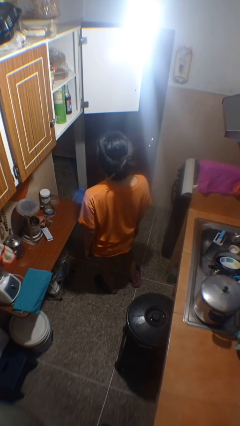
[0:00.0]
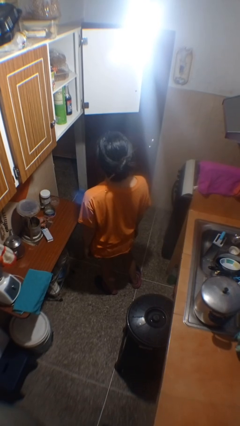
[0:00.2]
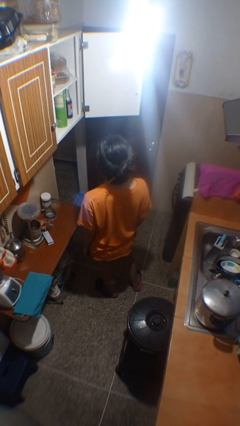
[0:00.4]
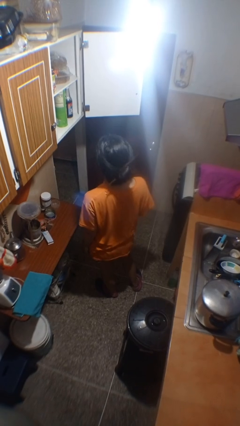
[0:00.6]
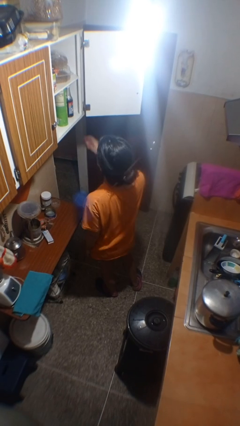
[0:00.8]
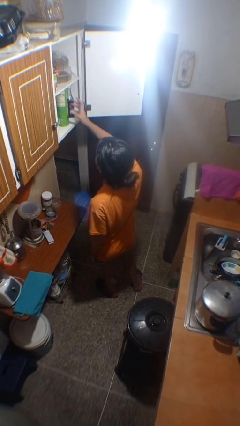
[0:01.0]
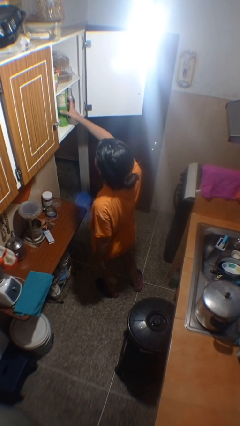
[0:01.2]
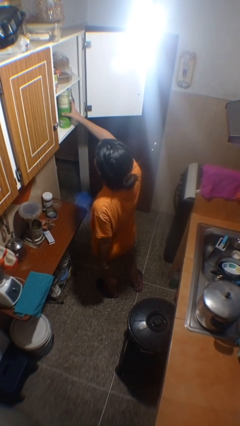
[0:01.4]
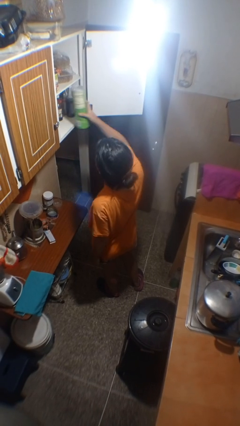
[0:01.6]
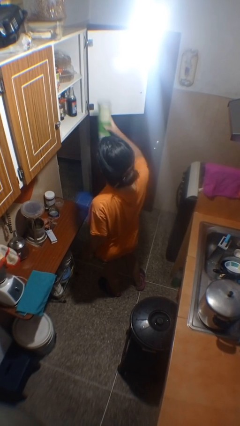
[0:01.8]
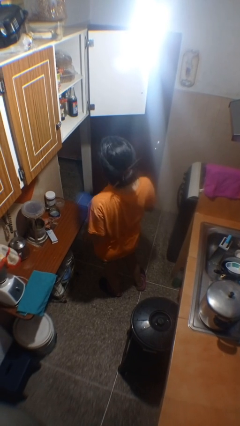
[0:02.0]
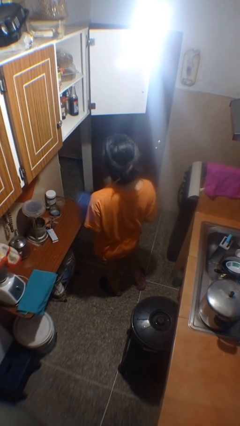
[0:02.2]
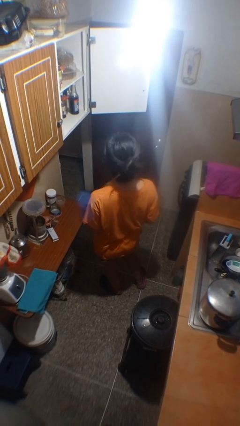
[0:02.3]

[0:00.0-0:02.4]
person takes object from cabinet

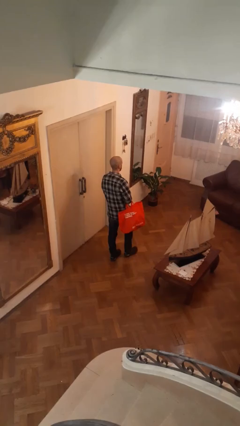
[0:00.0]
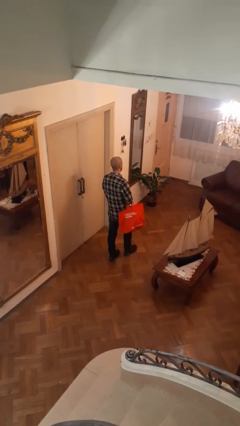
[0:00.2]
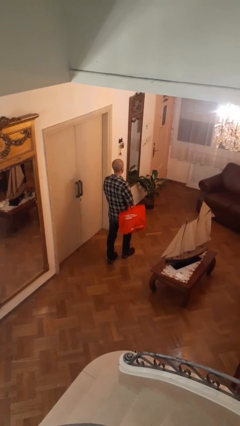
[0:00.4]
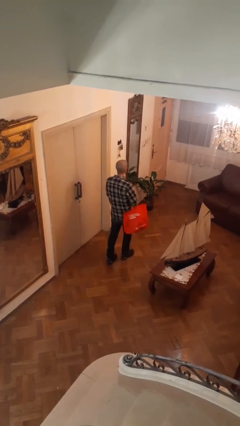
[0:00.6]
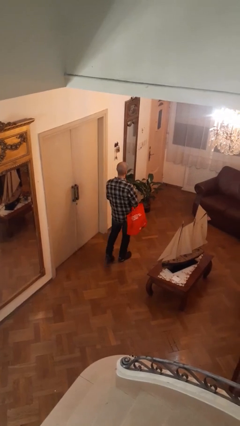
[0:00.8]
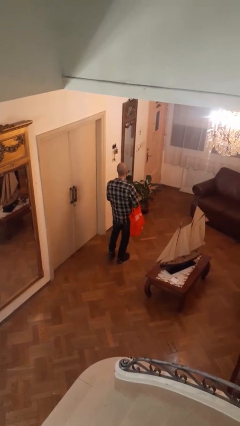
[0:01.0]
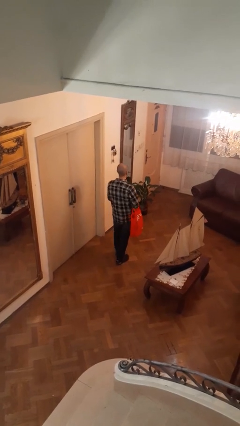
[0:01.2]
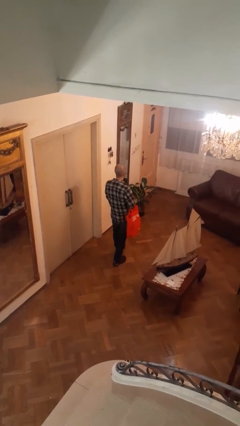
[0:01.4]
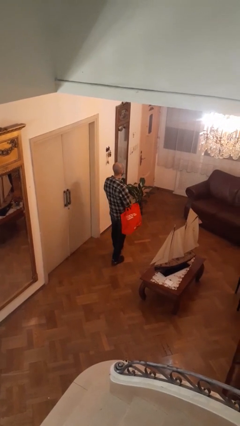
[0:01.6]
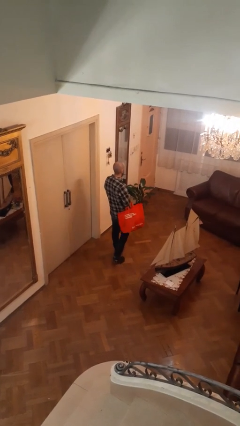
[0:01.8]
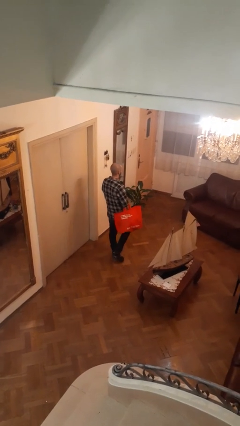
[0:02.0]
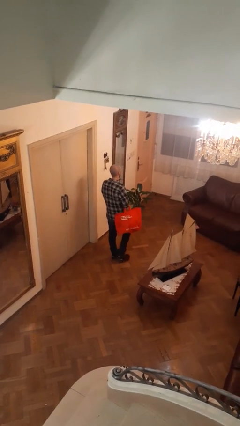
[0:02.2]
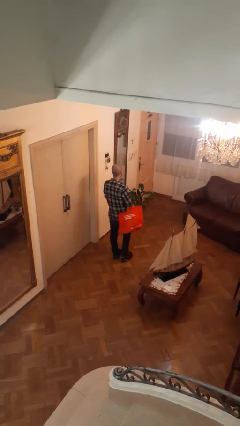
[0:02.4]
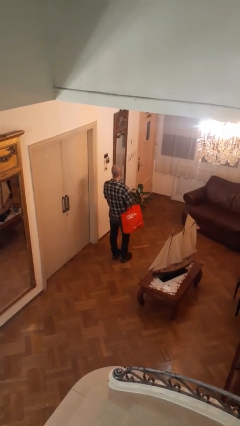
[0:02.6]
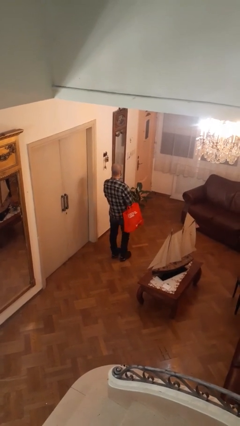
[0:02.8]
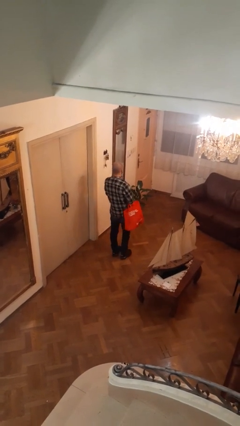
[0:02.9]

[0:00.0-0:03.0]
person carries groceries

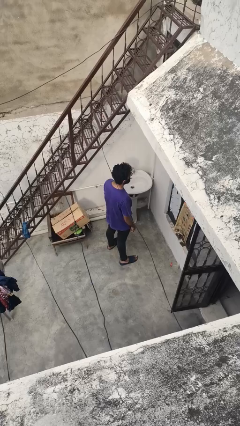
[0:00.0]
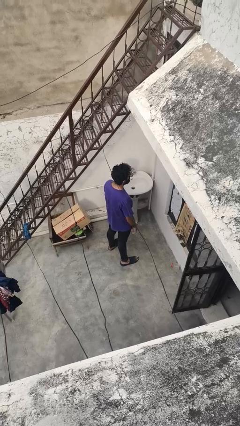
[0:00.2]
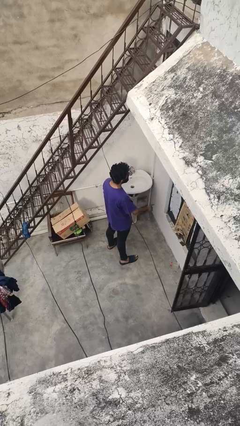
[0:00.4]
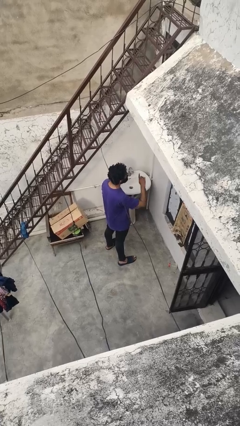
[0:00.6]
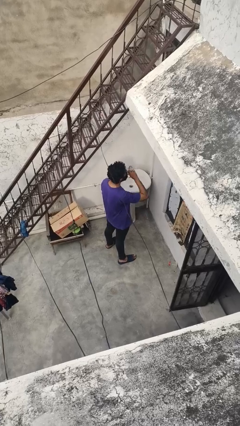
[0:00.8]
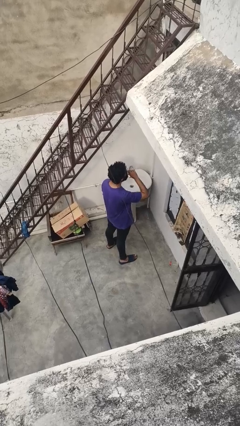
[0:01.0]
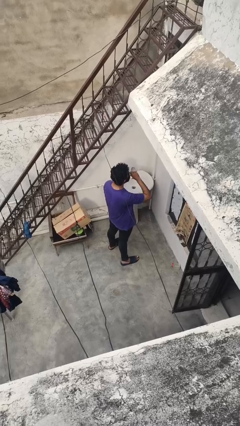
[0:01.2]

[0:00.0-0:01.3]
person gestures be quiet

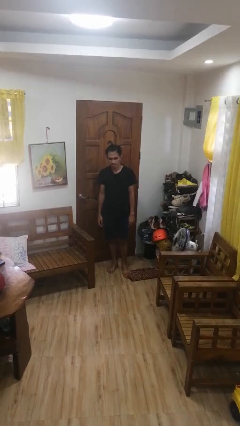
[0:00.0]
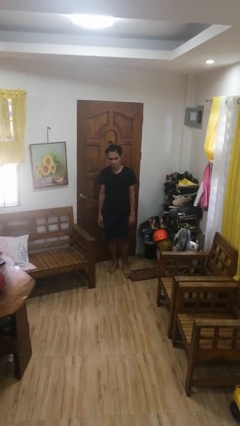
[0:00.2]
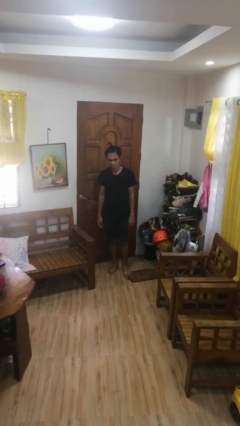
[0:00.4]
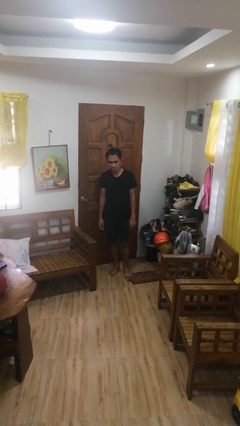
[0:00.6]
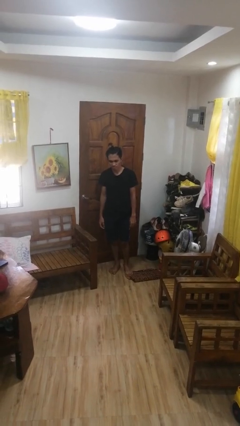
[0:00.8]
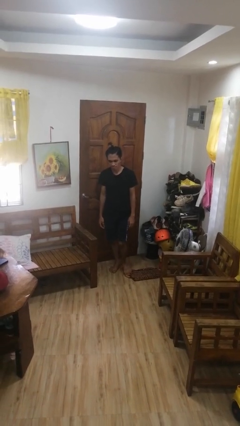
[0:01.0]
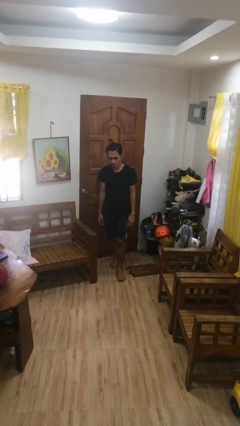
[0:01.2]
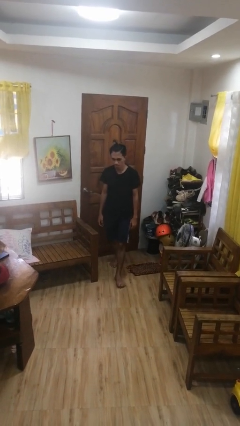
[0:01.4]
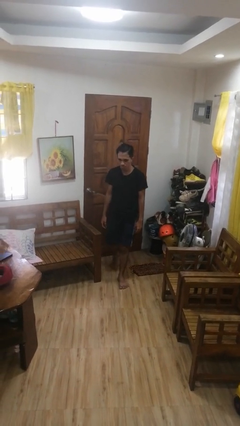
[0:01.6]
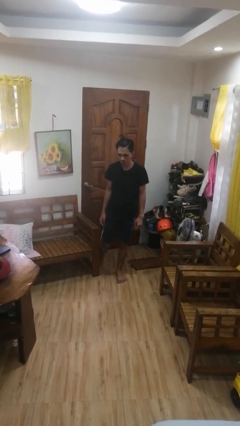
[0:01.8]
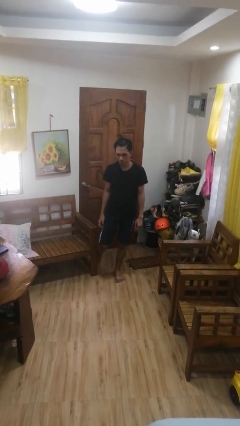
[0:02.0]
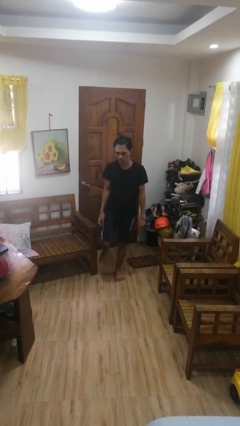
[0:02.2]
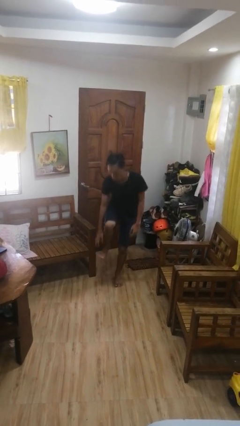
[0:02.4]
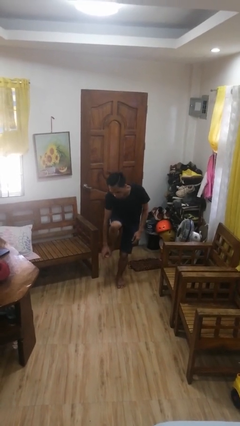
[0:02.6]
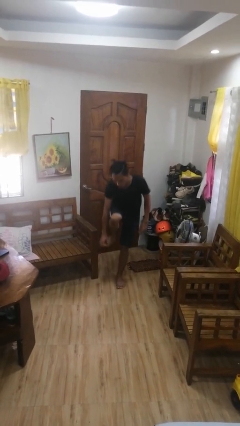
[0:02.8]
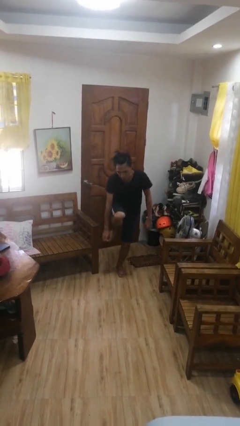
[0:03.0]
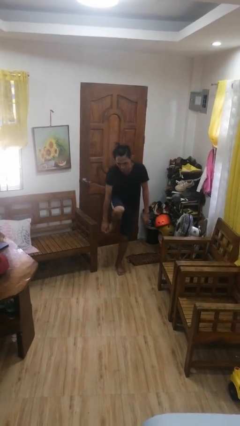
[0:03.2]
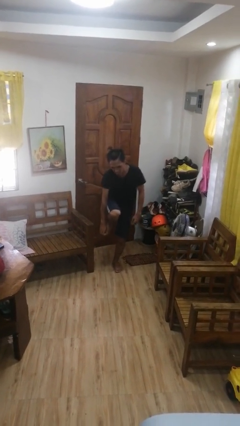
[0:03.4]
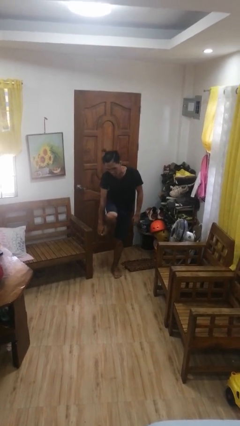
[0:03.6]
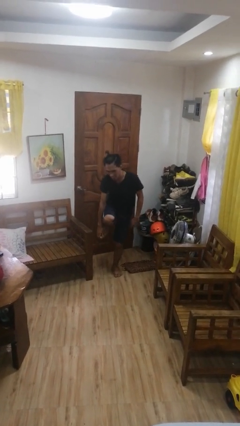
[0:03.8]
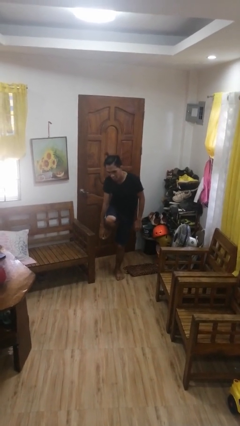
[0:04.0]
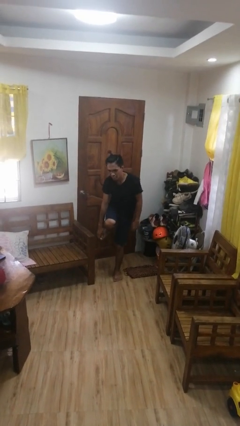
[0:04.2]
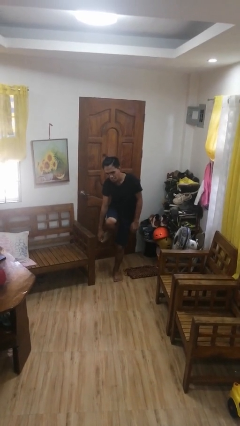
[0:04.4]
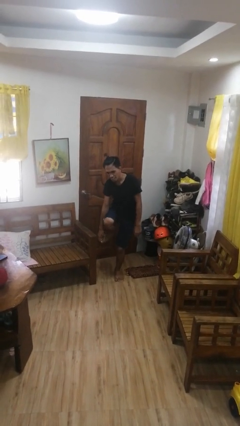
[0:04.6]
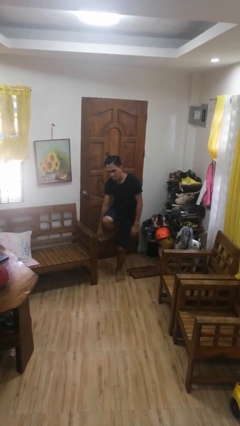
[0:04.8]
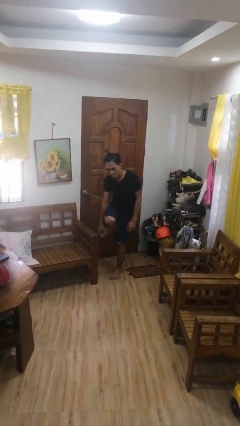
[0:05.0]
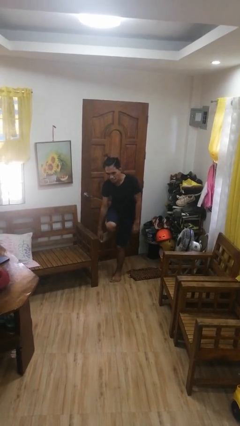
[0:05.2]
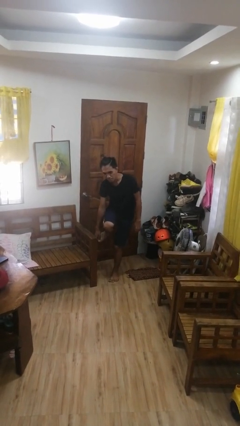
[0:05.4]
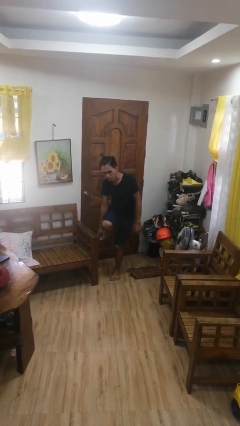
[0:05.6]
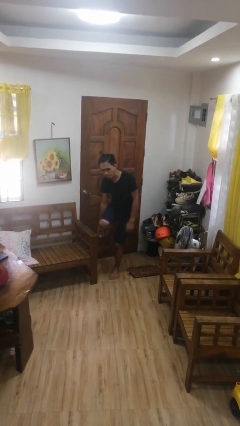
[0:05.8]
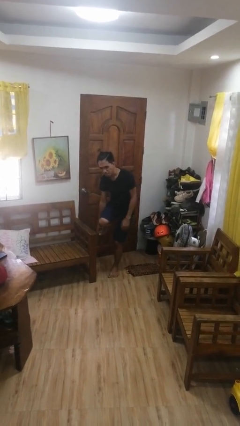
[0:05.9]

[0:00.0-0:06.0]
person stubs toe

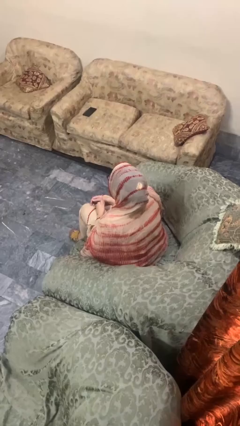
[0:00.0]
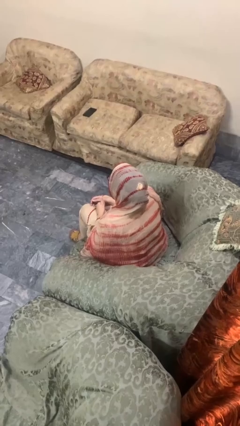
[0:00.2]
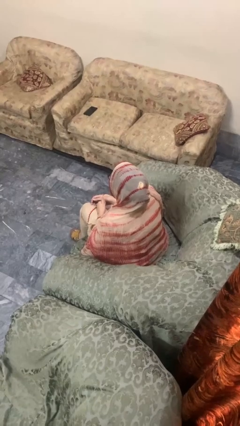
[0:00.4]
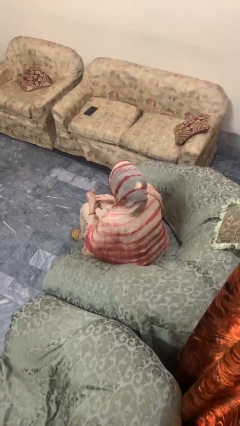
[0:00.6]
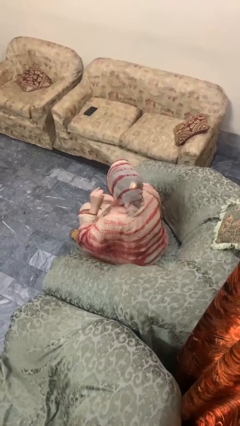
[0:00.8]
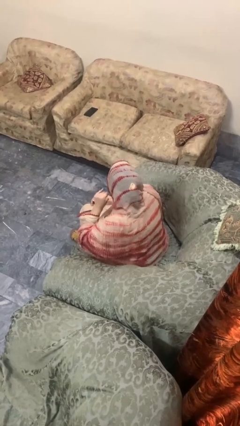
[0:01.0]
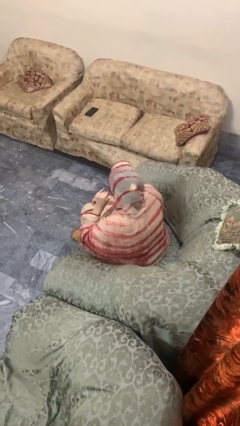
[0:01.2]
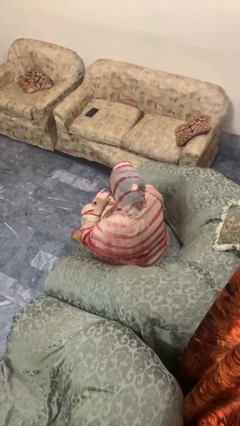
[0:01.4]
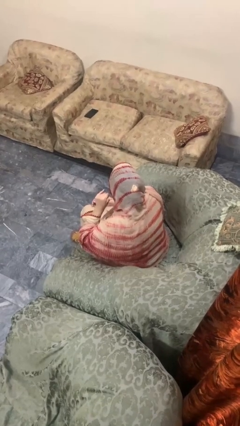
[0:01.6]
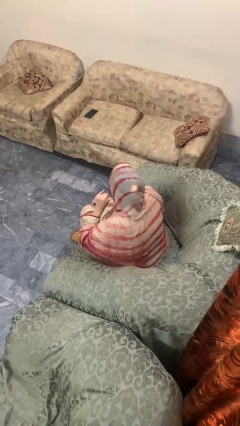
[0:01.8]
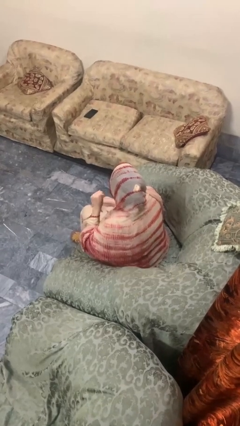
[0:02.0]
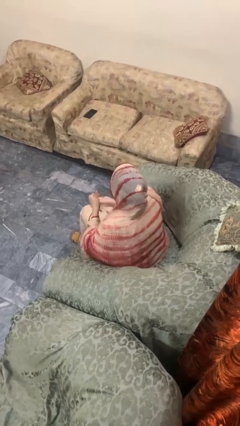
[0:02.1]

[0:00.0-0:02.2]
person gestures call me

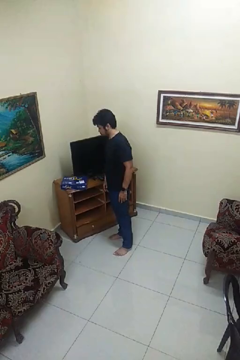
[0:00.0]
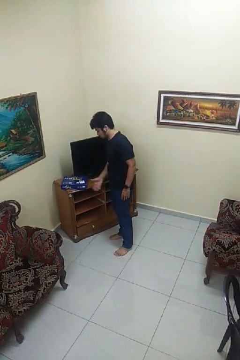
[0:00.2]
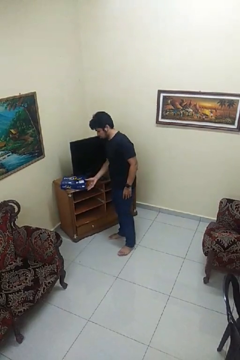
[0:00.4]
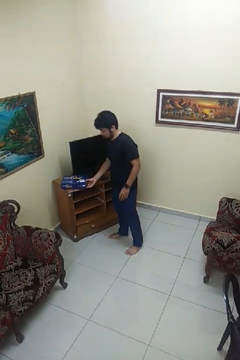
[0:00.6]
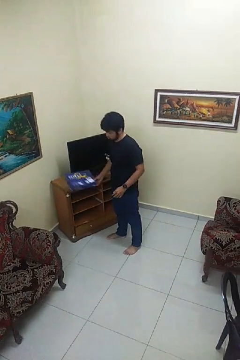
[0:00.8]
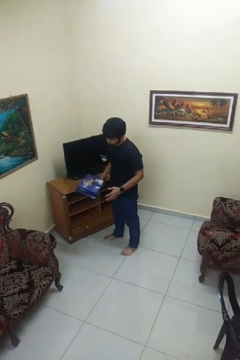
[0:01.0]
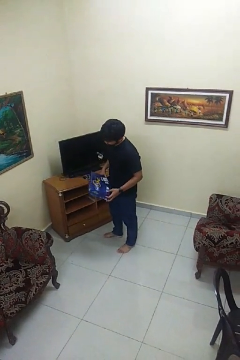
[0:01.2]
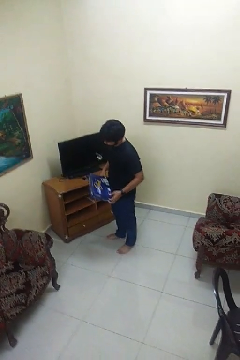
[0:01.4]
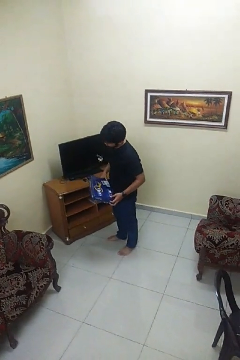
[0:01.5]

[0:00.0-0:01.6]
person picks up object from countertop

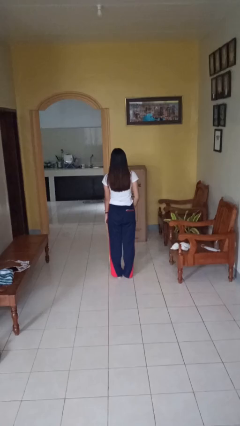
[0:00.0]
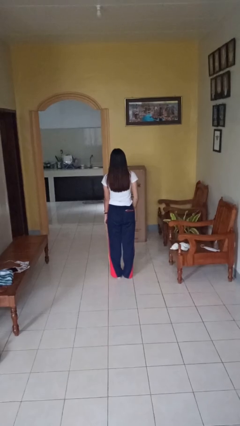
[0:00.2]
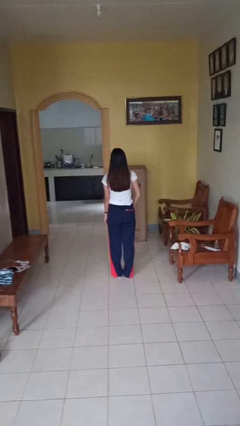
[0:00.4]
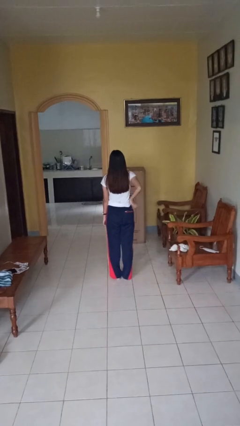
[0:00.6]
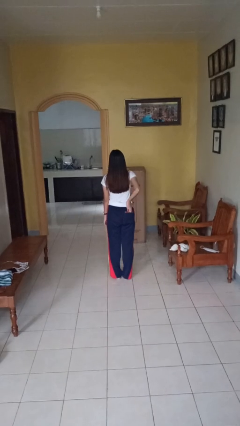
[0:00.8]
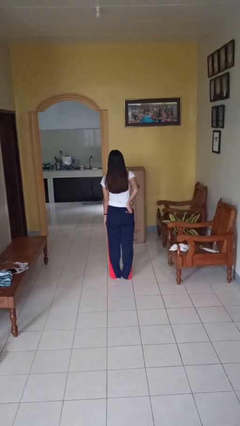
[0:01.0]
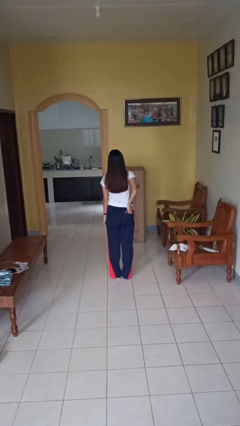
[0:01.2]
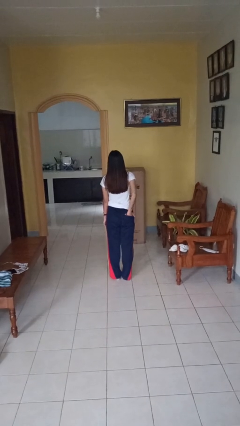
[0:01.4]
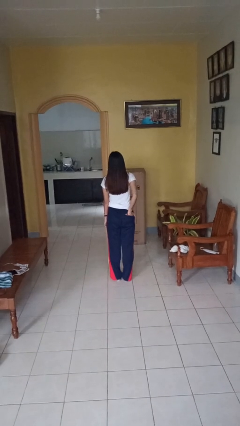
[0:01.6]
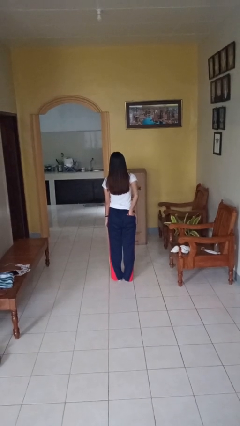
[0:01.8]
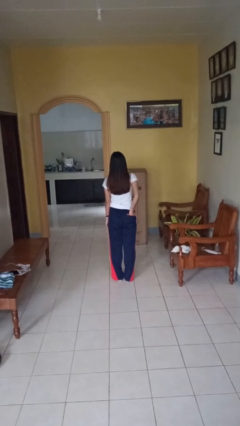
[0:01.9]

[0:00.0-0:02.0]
person puts hands in back pockets
